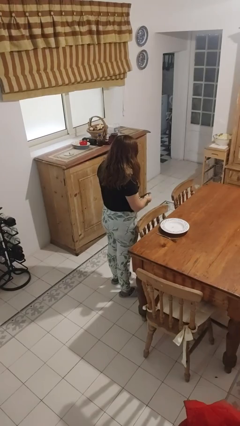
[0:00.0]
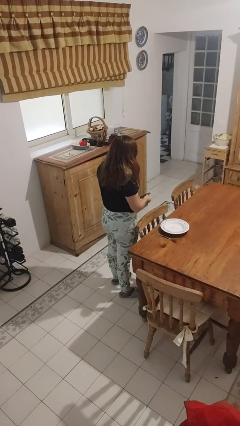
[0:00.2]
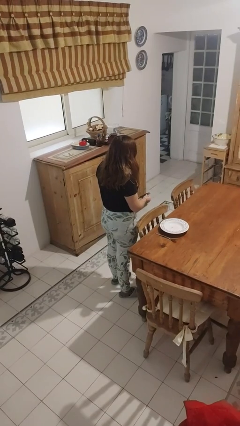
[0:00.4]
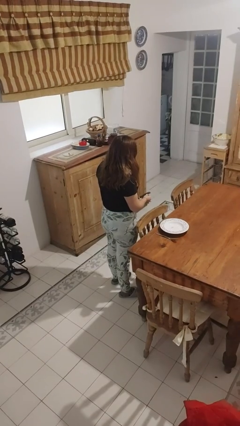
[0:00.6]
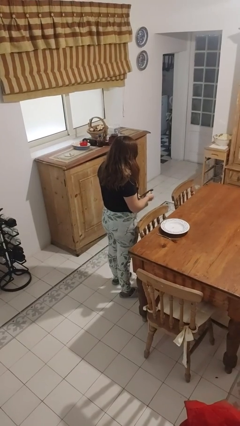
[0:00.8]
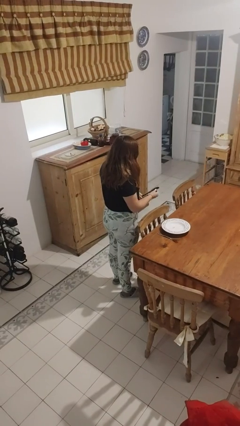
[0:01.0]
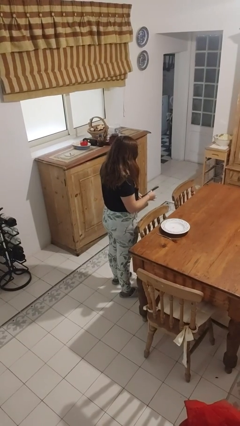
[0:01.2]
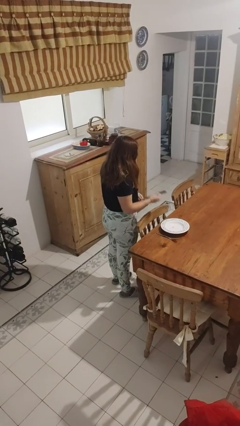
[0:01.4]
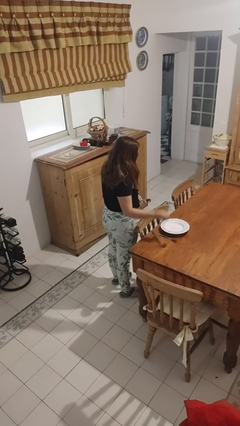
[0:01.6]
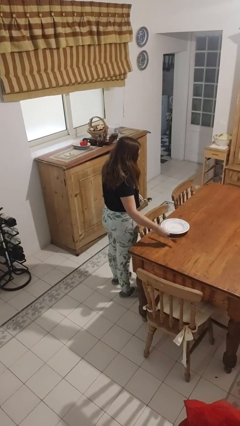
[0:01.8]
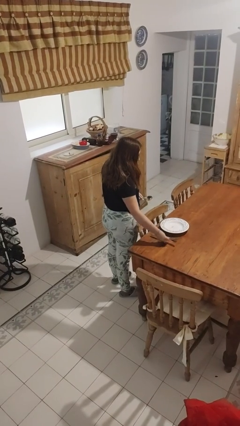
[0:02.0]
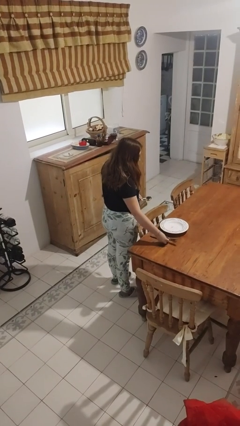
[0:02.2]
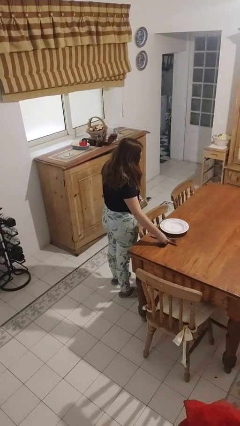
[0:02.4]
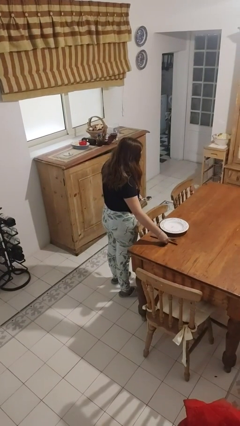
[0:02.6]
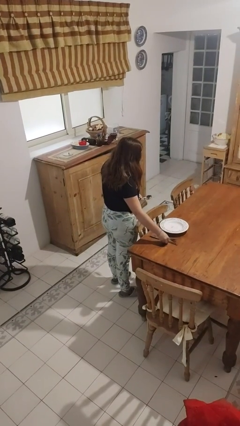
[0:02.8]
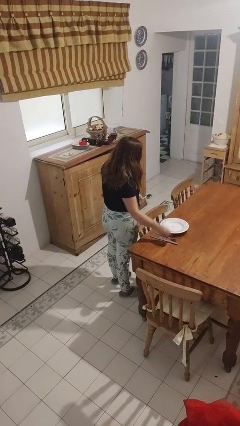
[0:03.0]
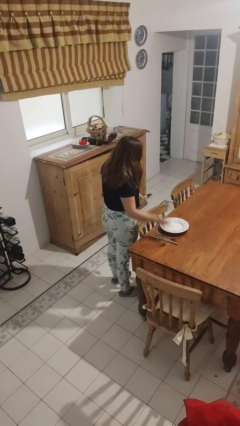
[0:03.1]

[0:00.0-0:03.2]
person sets table

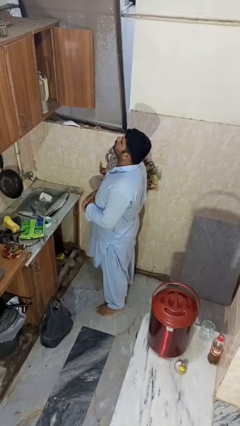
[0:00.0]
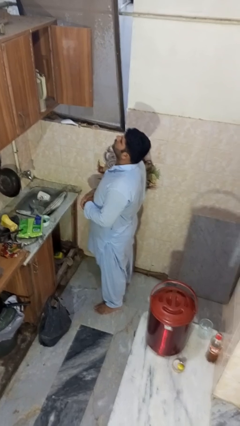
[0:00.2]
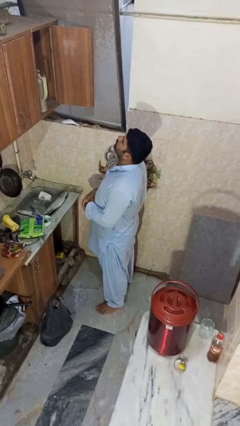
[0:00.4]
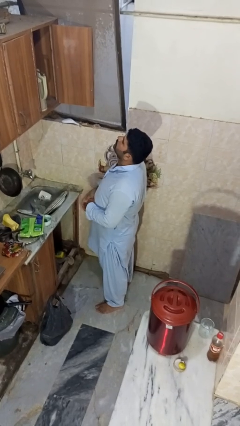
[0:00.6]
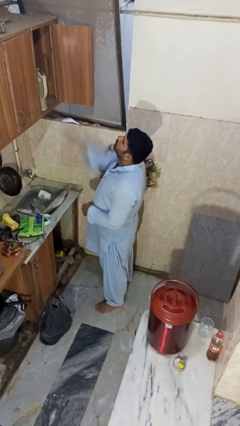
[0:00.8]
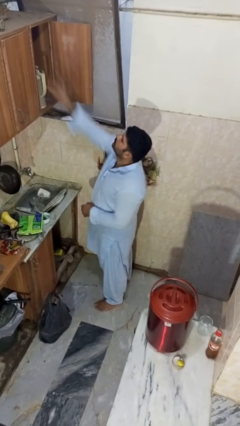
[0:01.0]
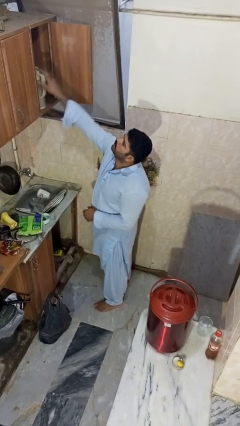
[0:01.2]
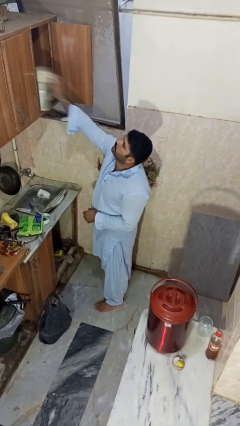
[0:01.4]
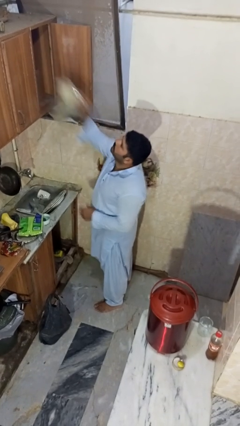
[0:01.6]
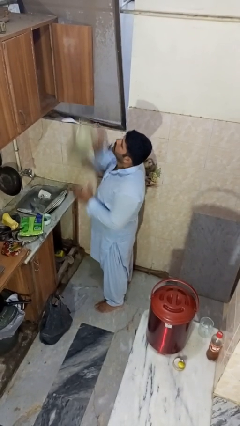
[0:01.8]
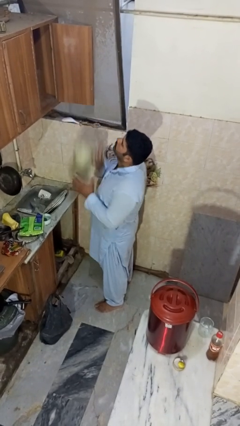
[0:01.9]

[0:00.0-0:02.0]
person takes object from cabinet

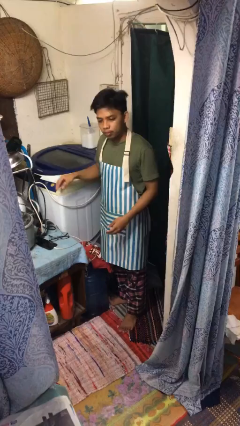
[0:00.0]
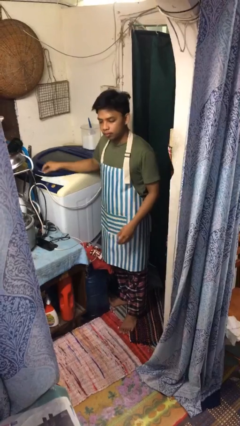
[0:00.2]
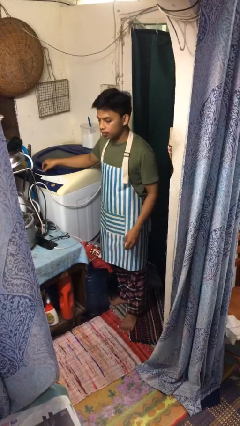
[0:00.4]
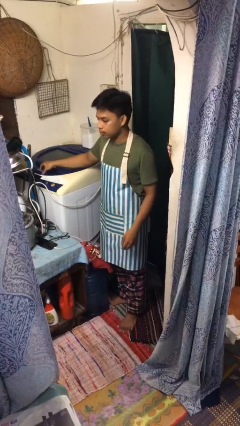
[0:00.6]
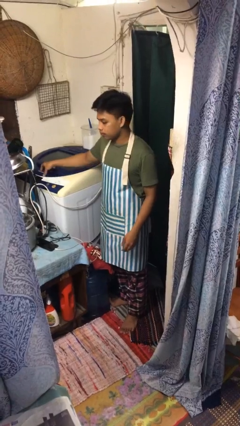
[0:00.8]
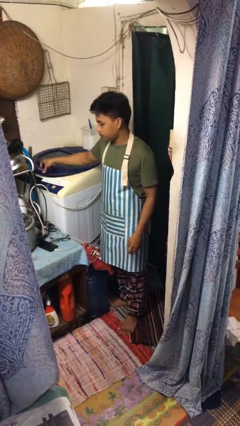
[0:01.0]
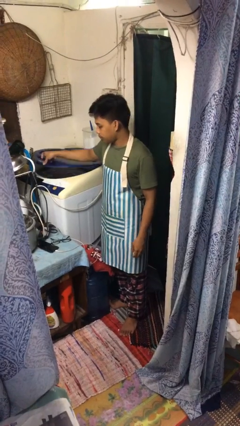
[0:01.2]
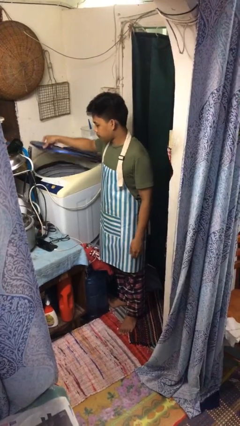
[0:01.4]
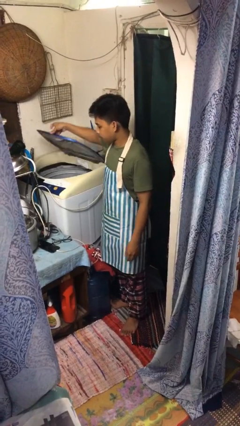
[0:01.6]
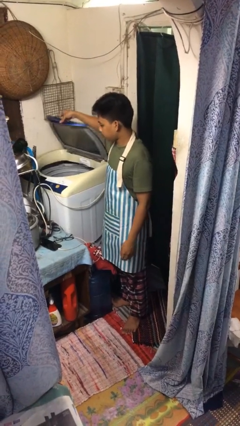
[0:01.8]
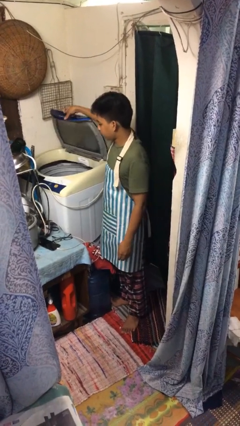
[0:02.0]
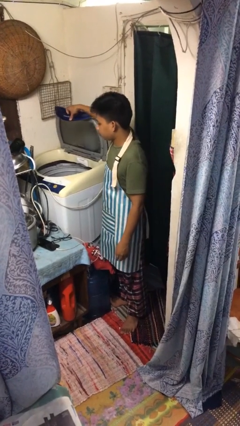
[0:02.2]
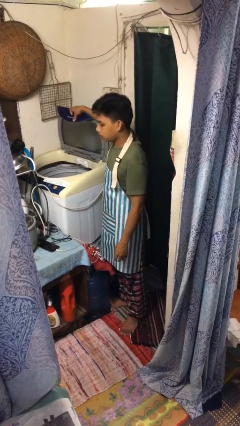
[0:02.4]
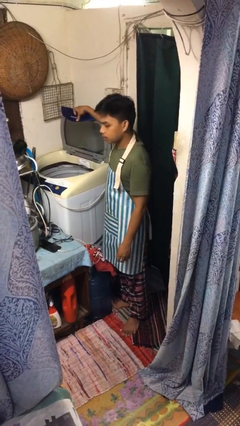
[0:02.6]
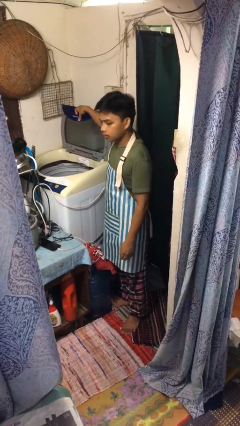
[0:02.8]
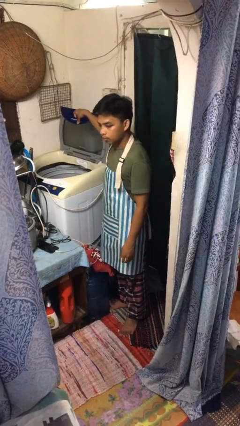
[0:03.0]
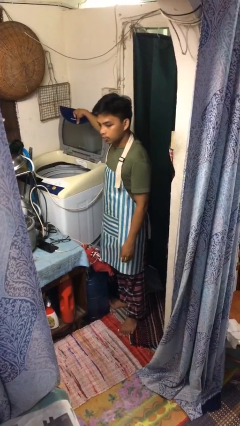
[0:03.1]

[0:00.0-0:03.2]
person opens clothes washer

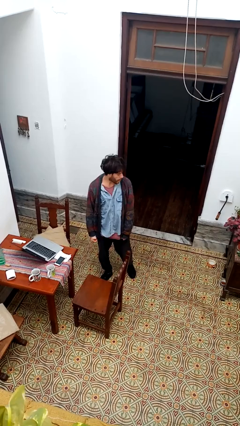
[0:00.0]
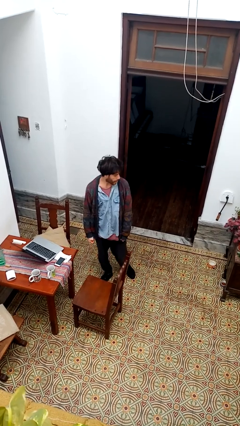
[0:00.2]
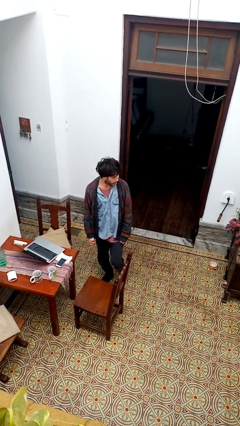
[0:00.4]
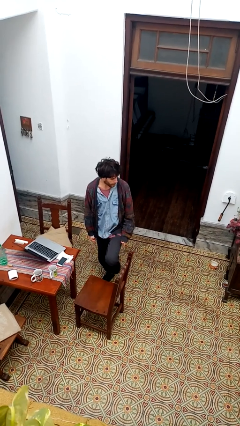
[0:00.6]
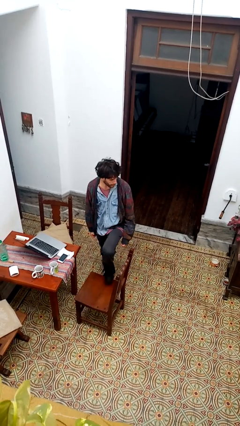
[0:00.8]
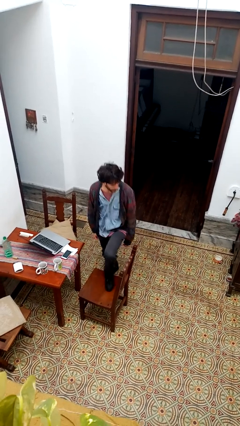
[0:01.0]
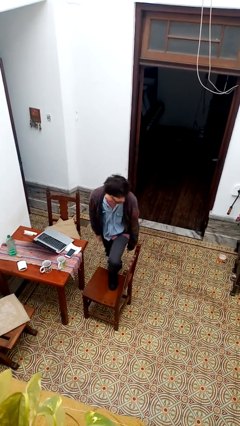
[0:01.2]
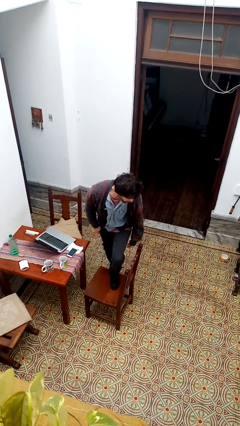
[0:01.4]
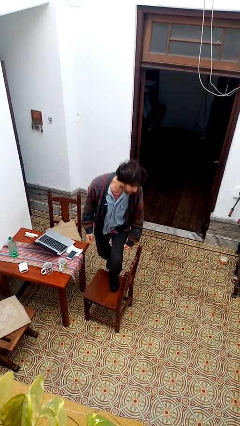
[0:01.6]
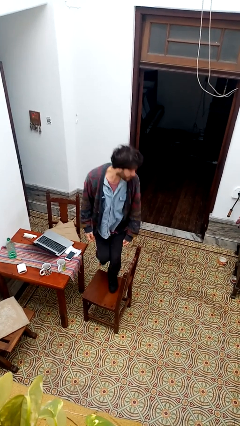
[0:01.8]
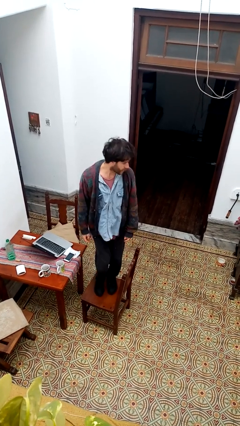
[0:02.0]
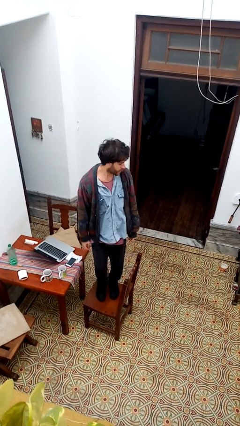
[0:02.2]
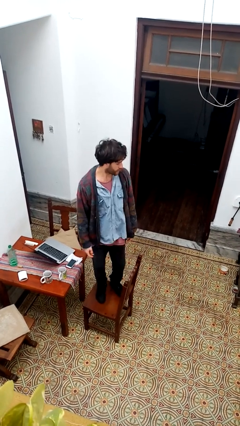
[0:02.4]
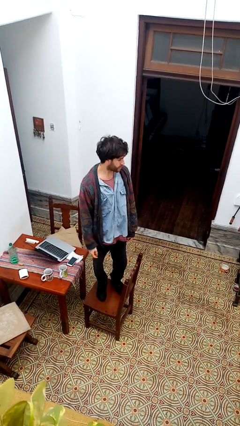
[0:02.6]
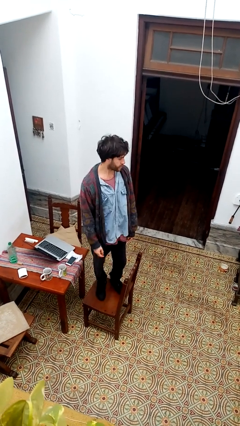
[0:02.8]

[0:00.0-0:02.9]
person climbs on chair

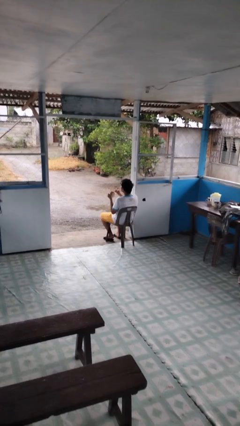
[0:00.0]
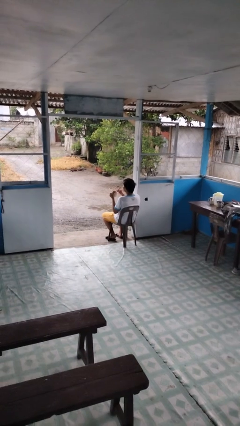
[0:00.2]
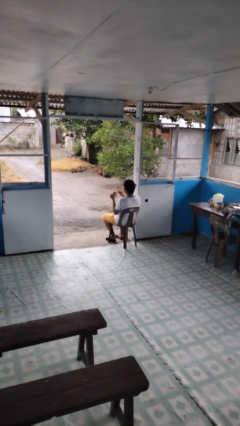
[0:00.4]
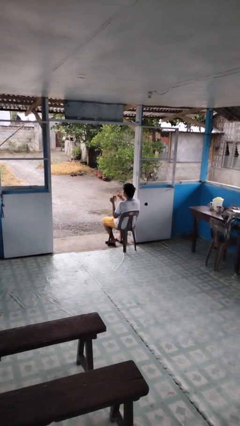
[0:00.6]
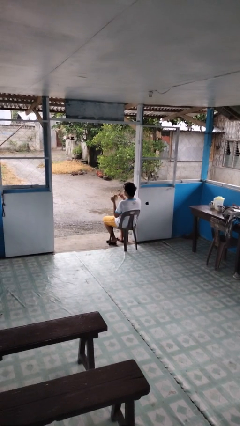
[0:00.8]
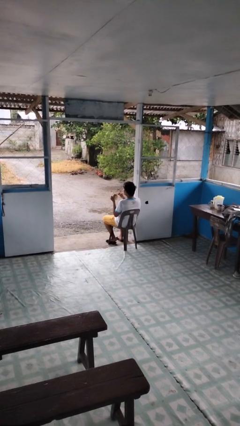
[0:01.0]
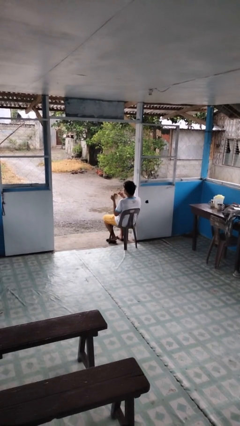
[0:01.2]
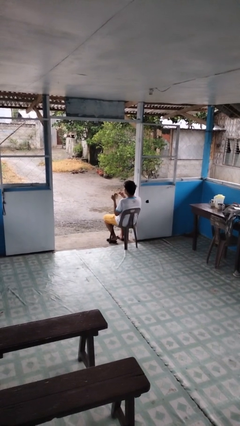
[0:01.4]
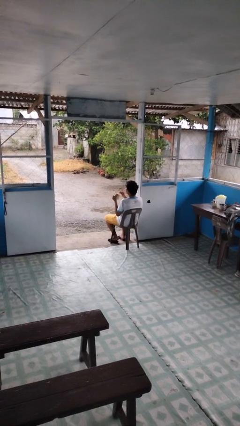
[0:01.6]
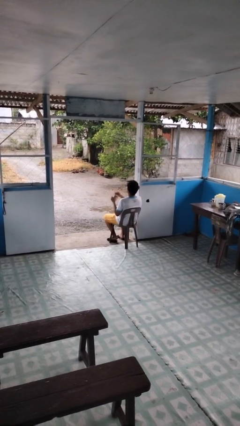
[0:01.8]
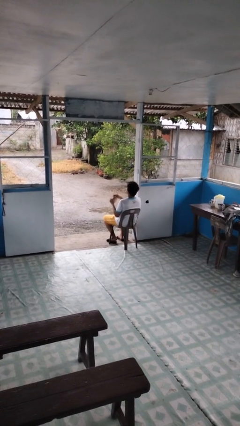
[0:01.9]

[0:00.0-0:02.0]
person drinks from straw

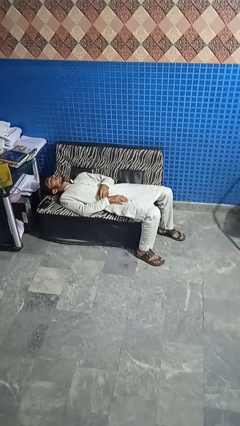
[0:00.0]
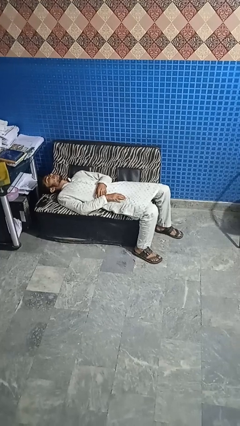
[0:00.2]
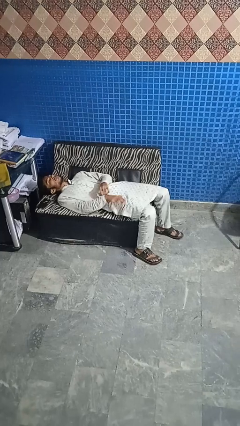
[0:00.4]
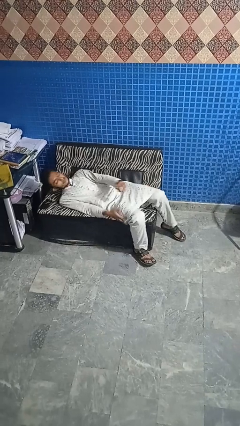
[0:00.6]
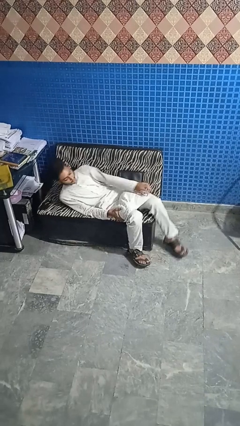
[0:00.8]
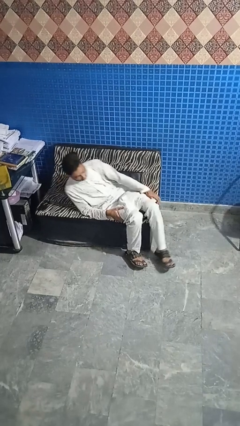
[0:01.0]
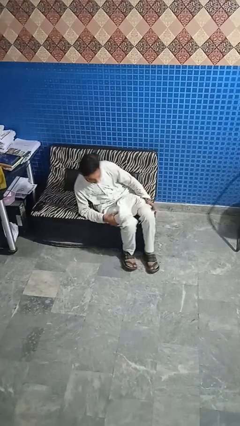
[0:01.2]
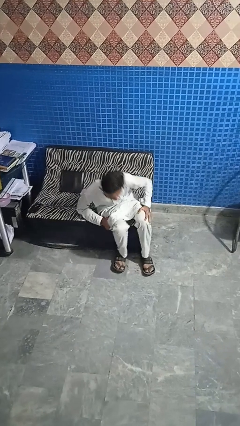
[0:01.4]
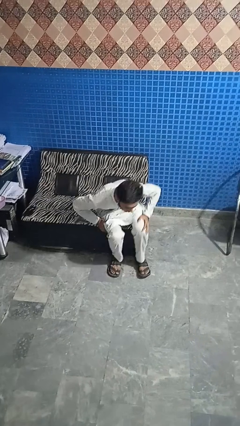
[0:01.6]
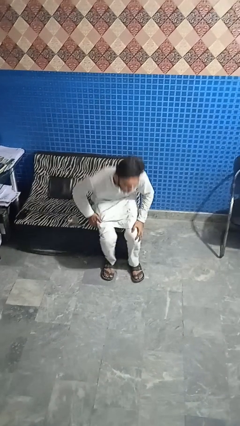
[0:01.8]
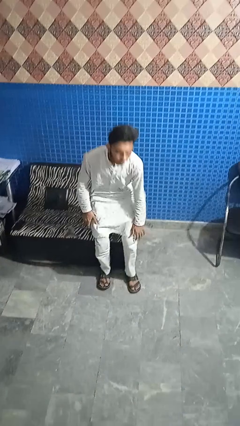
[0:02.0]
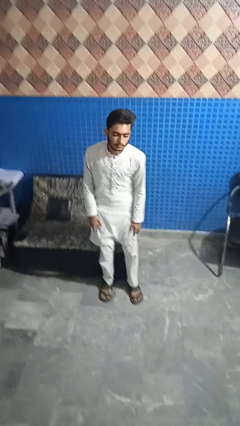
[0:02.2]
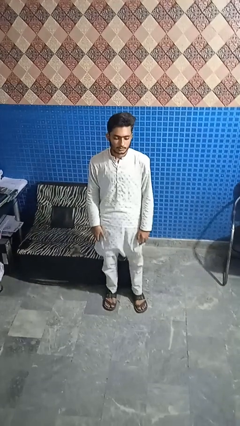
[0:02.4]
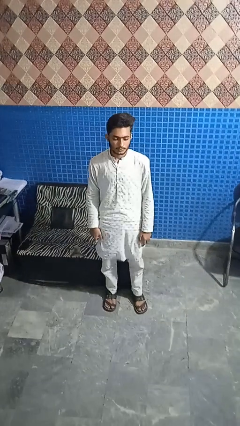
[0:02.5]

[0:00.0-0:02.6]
person stands up

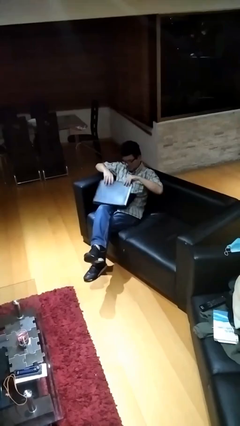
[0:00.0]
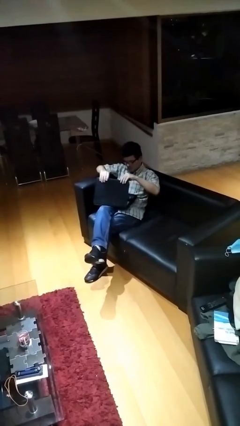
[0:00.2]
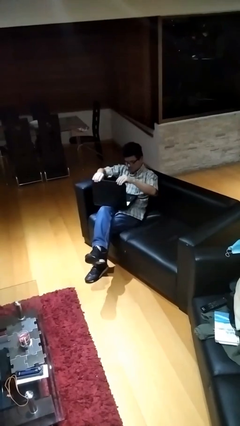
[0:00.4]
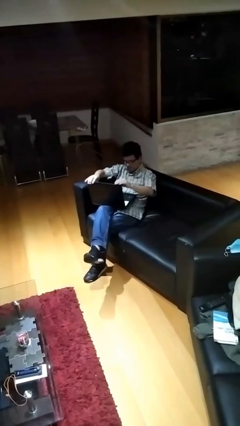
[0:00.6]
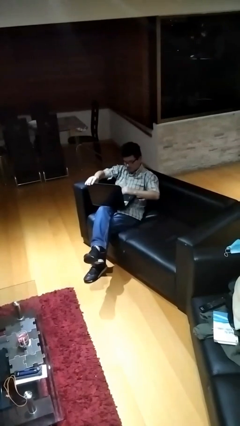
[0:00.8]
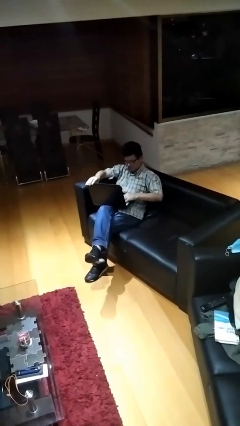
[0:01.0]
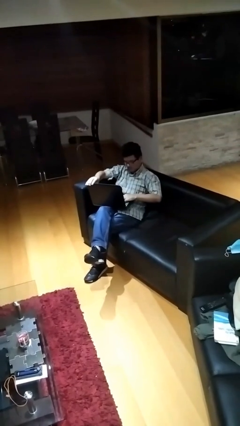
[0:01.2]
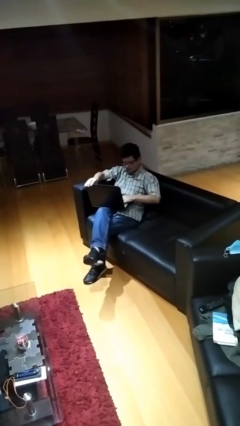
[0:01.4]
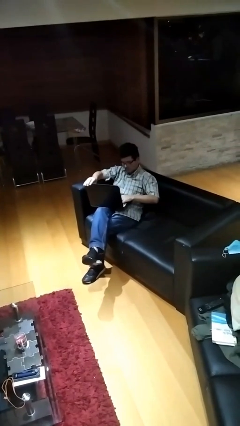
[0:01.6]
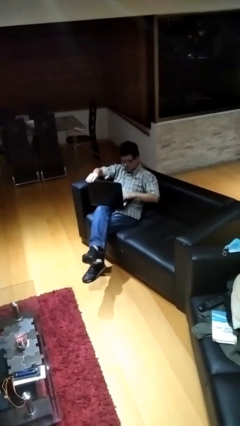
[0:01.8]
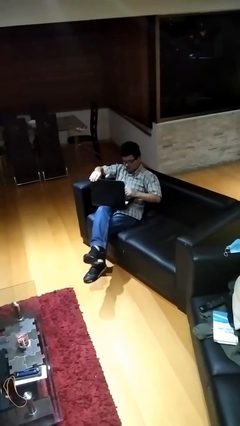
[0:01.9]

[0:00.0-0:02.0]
person interacts with laptop
